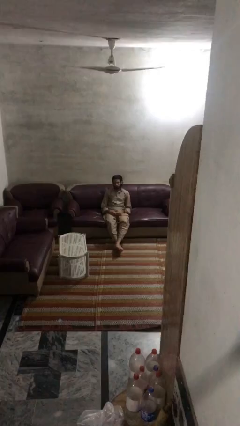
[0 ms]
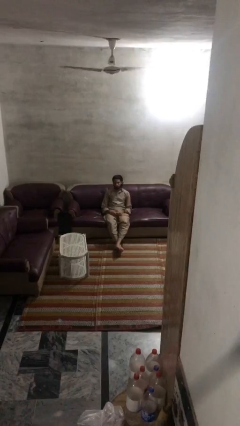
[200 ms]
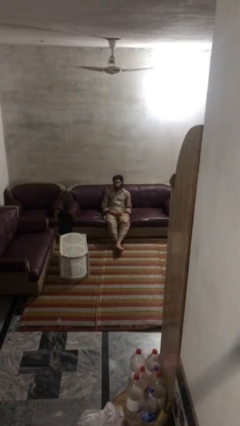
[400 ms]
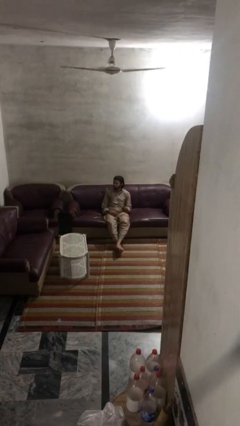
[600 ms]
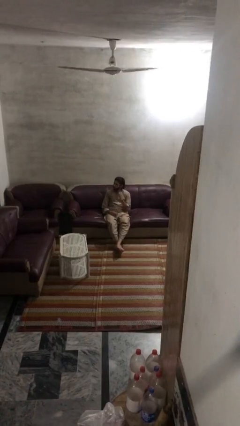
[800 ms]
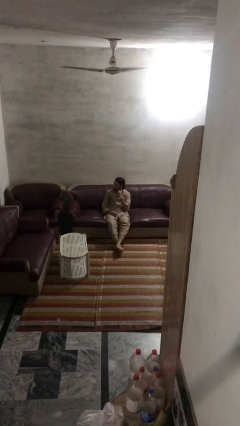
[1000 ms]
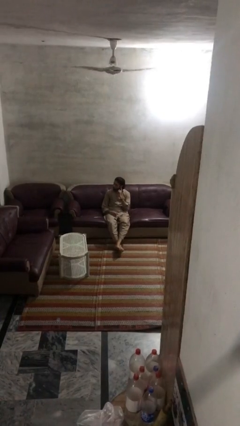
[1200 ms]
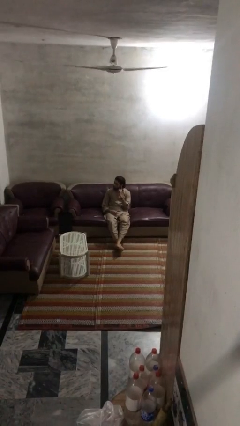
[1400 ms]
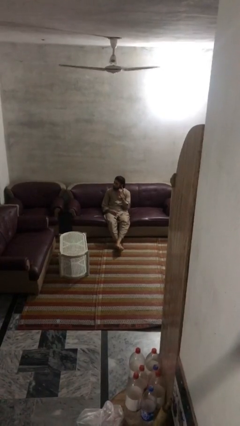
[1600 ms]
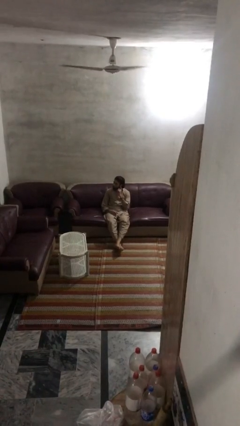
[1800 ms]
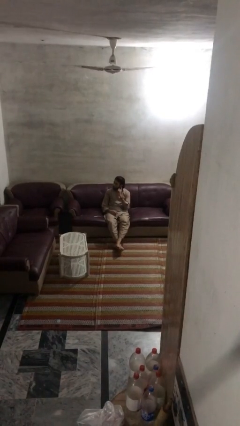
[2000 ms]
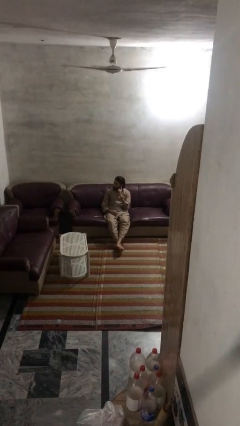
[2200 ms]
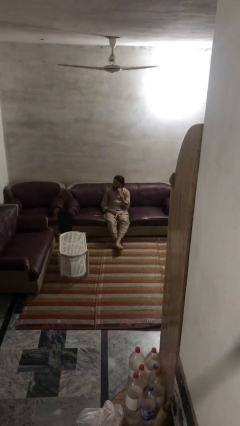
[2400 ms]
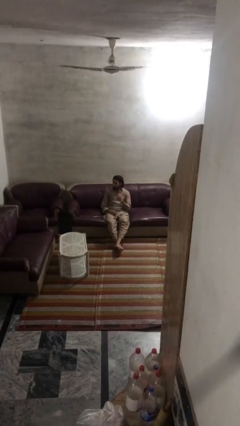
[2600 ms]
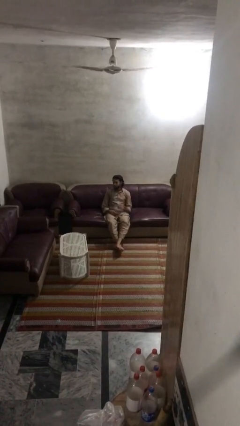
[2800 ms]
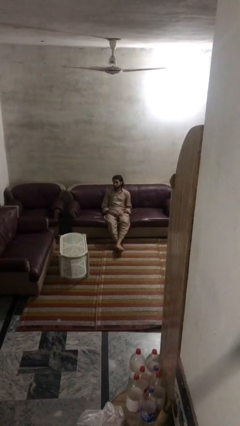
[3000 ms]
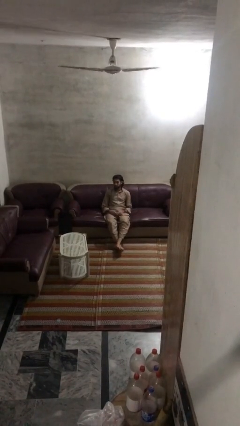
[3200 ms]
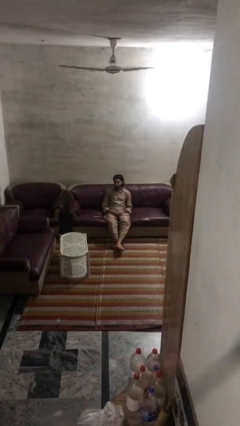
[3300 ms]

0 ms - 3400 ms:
person gestures listen closely

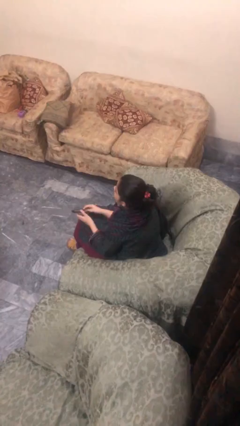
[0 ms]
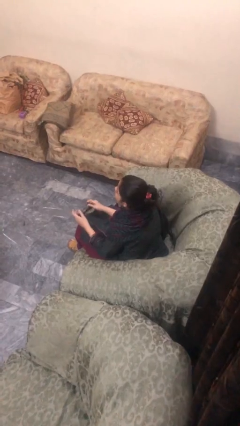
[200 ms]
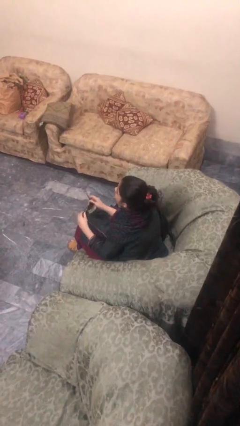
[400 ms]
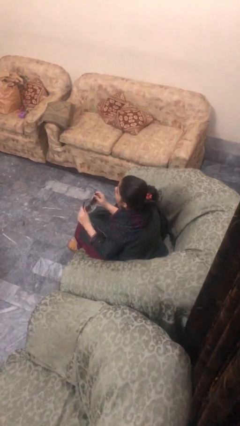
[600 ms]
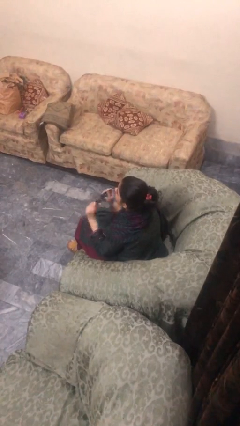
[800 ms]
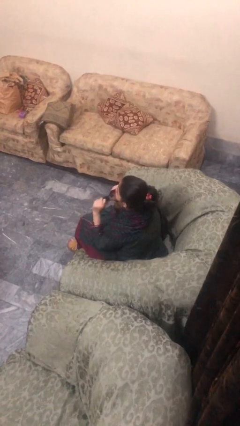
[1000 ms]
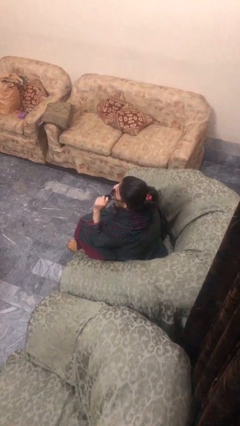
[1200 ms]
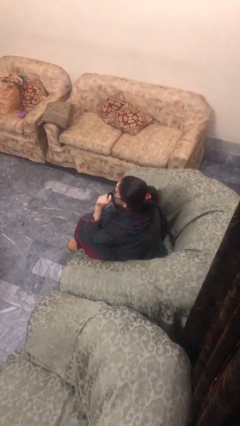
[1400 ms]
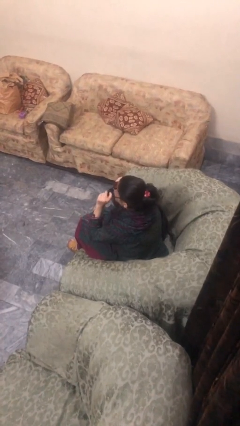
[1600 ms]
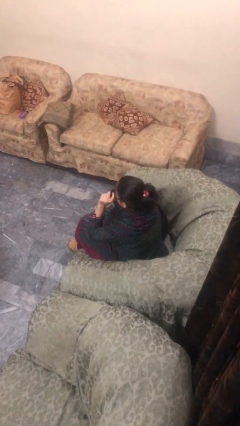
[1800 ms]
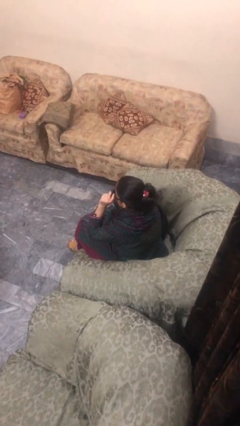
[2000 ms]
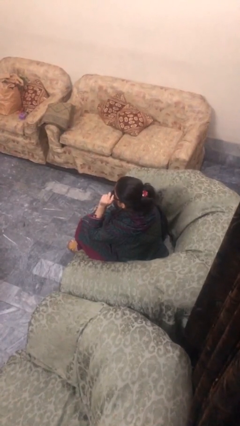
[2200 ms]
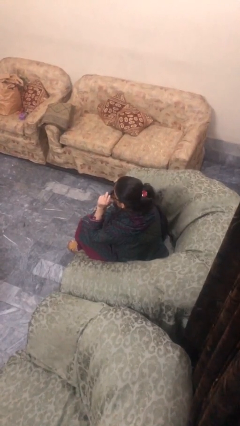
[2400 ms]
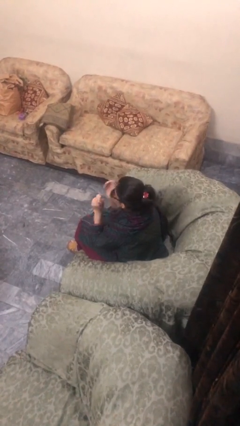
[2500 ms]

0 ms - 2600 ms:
person puts on sunglasses

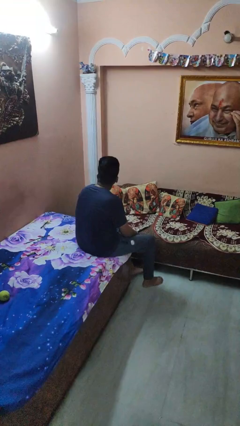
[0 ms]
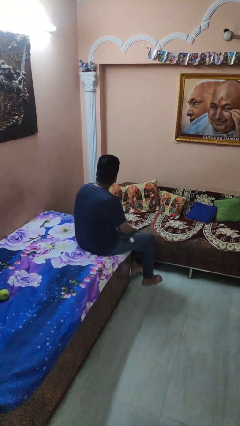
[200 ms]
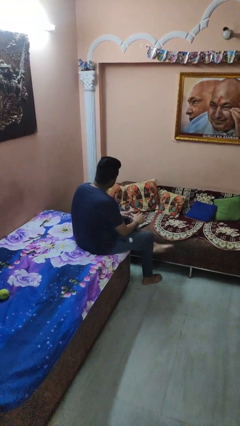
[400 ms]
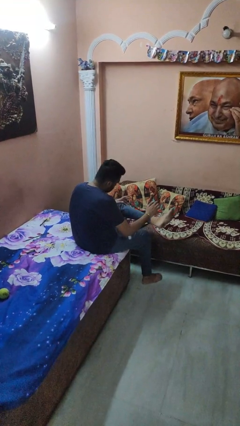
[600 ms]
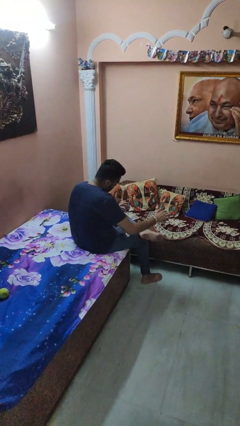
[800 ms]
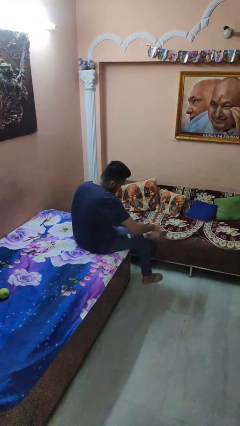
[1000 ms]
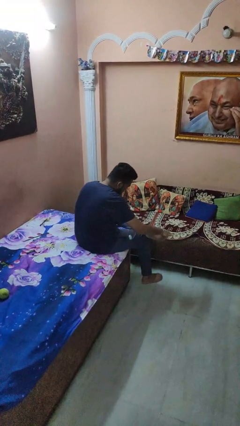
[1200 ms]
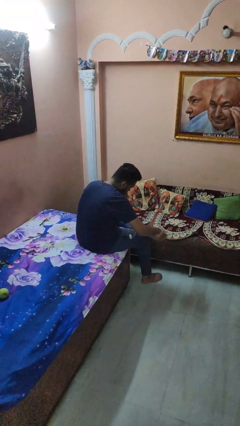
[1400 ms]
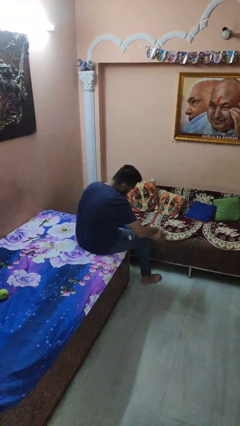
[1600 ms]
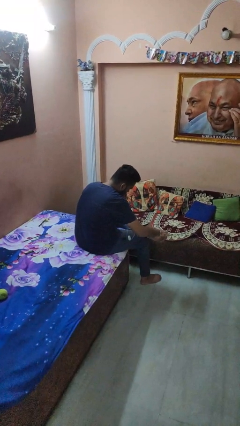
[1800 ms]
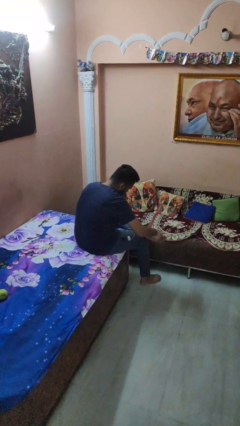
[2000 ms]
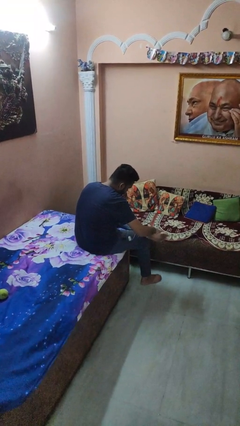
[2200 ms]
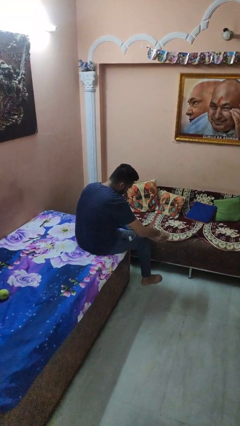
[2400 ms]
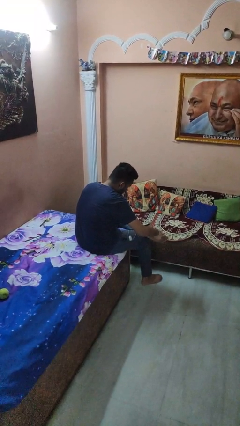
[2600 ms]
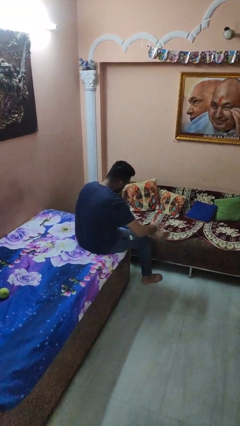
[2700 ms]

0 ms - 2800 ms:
person rubs foot

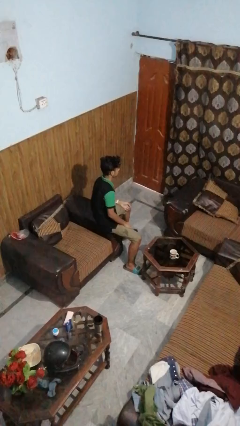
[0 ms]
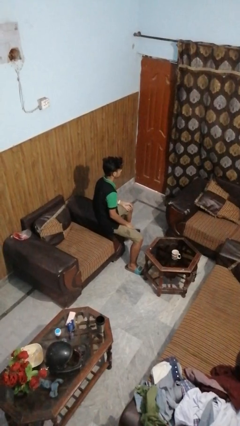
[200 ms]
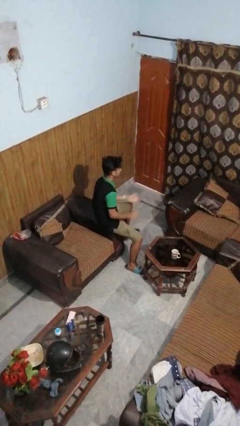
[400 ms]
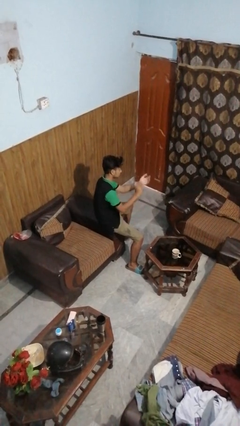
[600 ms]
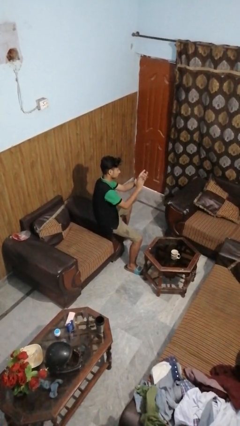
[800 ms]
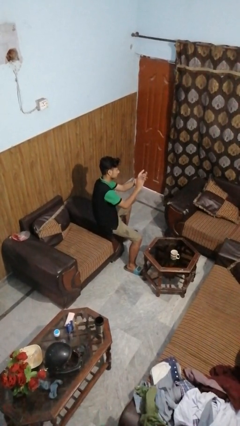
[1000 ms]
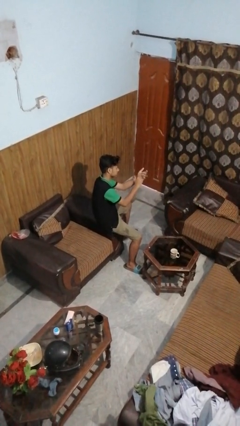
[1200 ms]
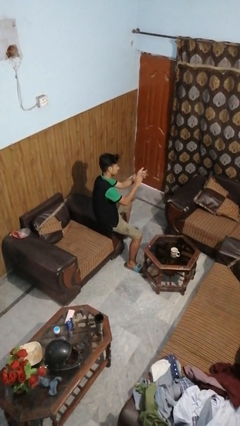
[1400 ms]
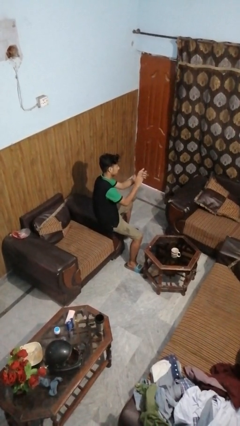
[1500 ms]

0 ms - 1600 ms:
person claps hands

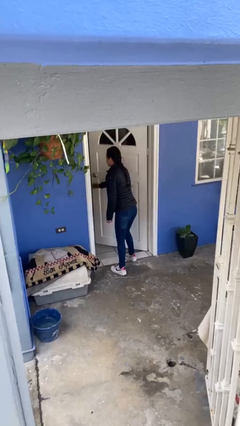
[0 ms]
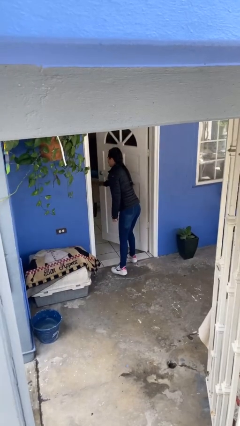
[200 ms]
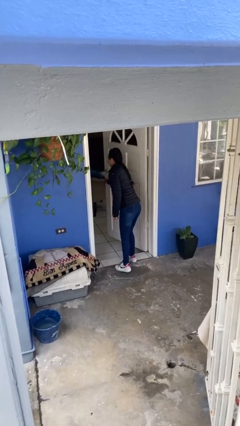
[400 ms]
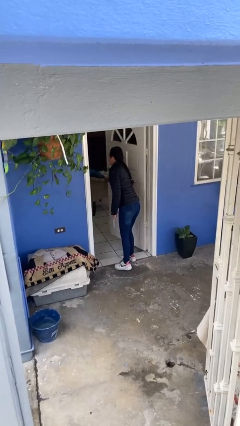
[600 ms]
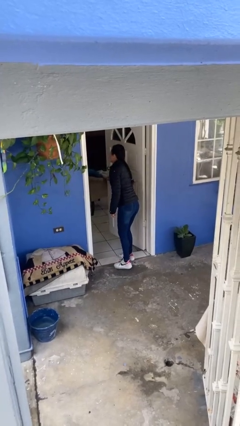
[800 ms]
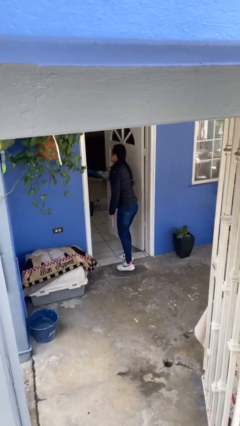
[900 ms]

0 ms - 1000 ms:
person opens facility door

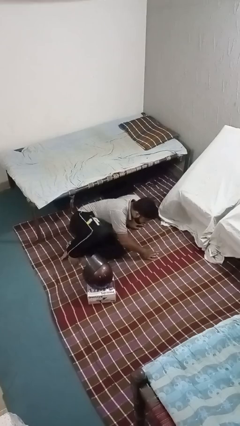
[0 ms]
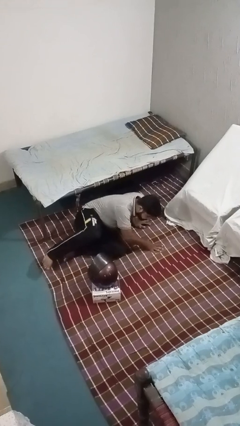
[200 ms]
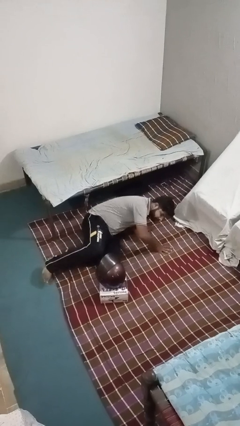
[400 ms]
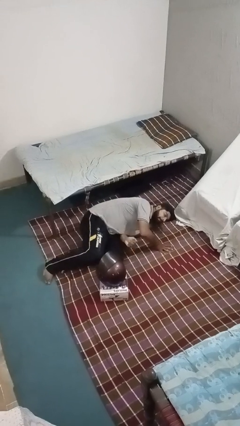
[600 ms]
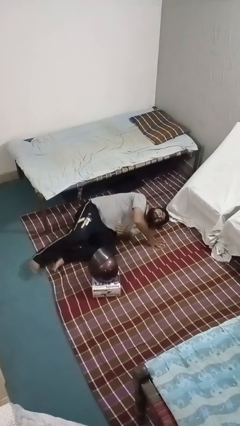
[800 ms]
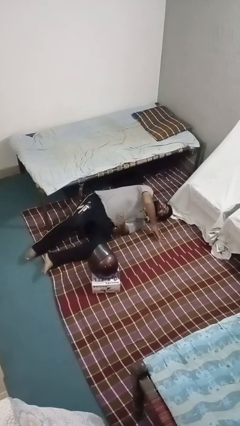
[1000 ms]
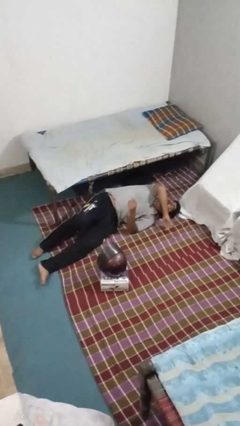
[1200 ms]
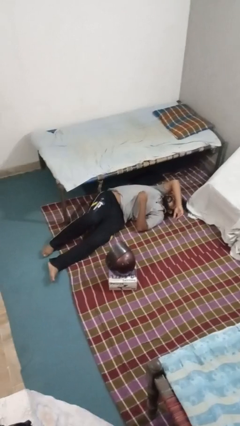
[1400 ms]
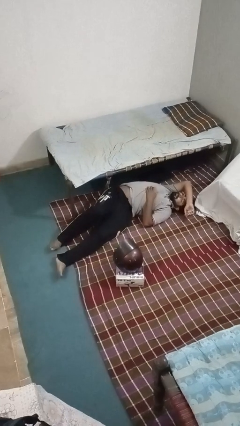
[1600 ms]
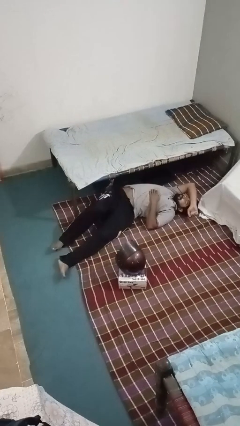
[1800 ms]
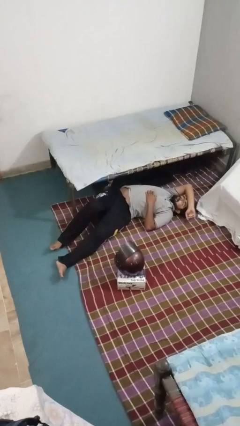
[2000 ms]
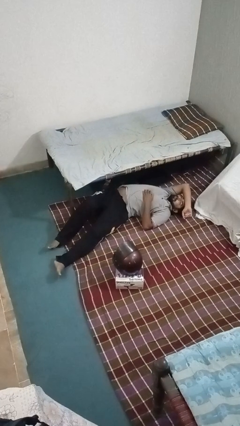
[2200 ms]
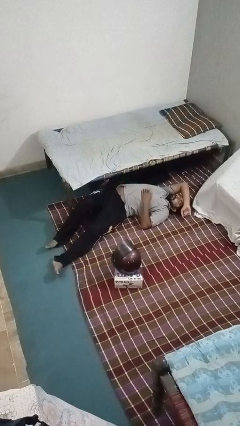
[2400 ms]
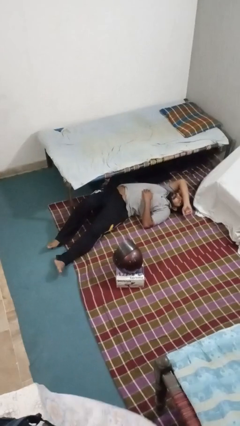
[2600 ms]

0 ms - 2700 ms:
person lies down on floor

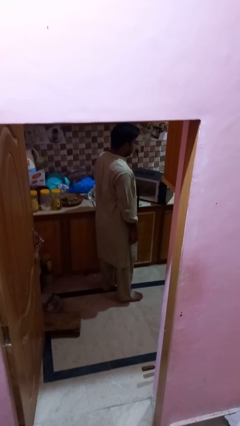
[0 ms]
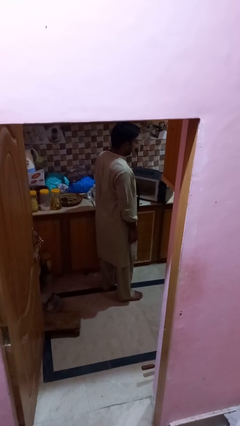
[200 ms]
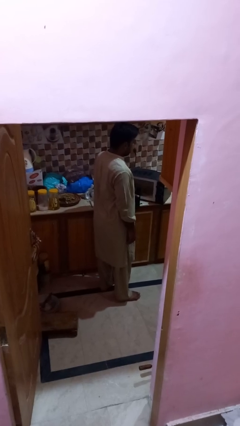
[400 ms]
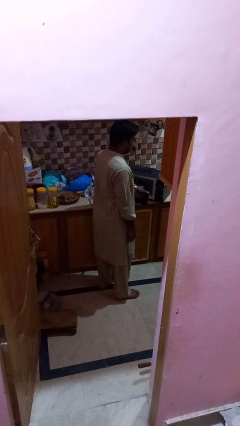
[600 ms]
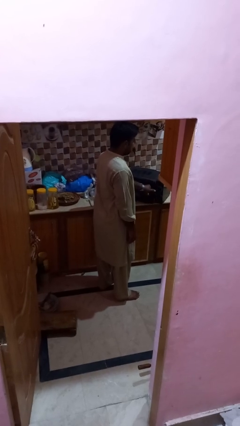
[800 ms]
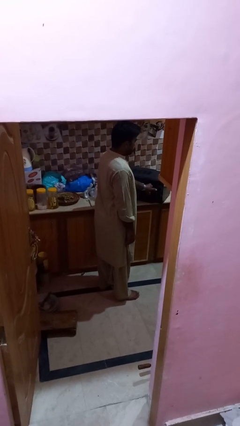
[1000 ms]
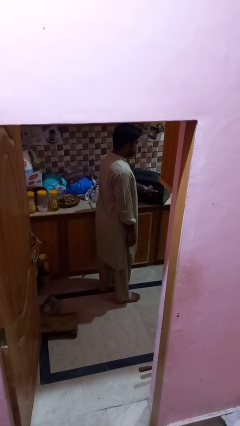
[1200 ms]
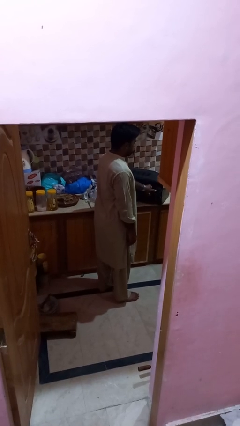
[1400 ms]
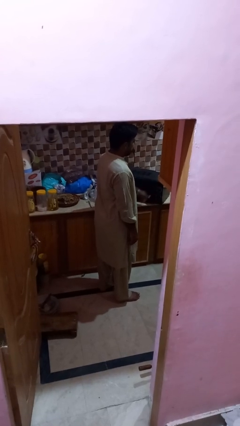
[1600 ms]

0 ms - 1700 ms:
person closes microwave

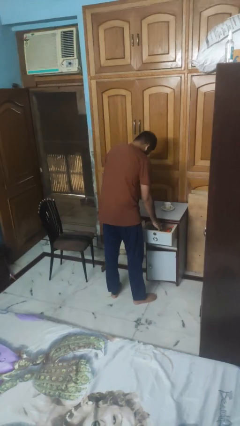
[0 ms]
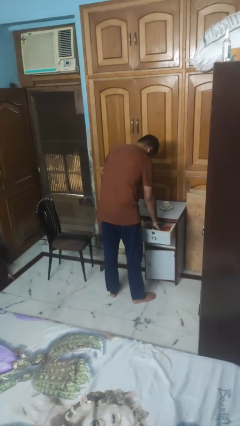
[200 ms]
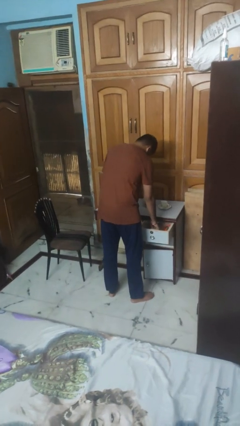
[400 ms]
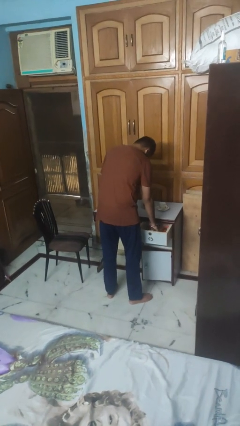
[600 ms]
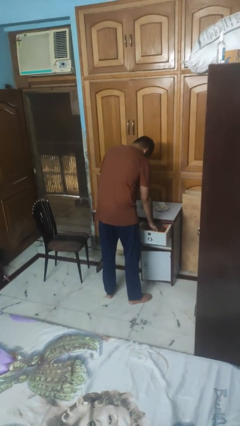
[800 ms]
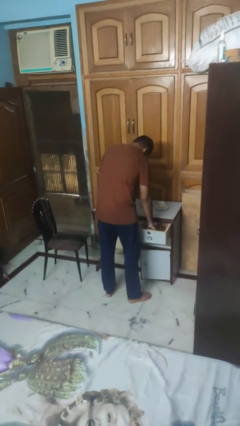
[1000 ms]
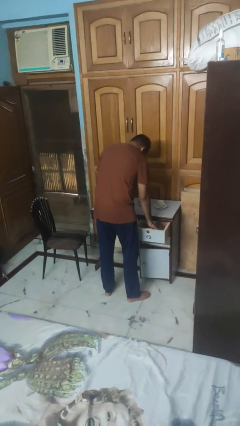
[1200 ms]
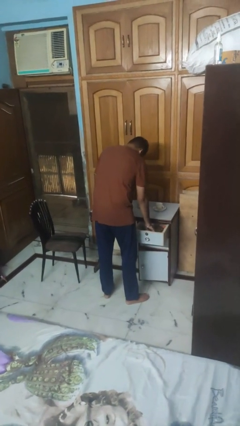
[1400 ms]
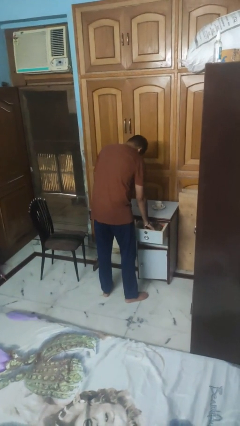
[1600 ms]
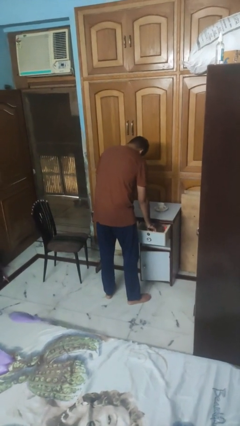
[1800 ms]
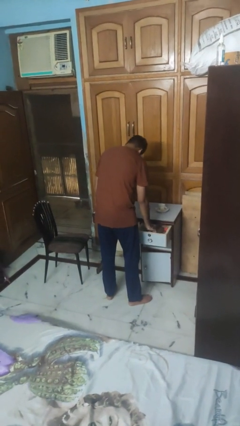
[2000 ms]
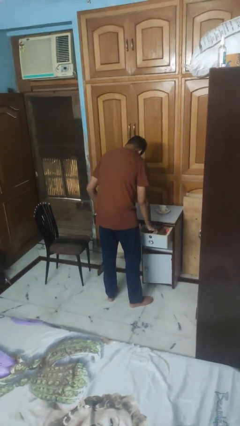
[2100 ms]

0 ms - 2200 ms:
person searches in kitchen drawer
